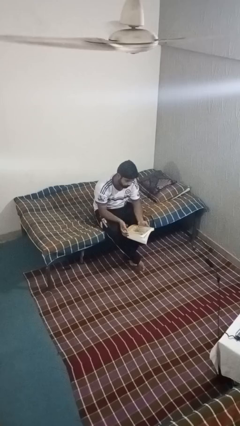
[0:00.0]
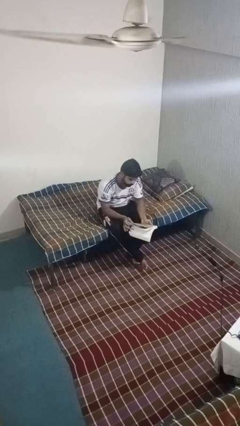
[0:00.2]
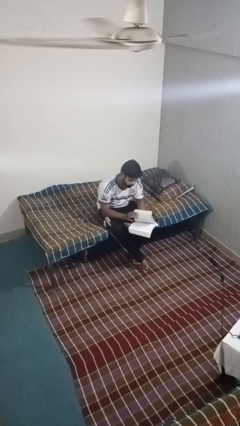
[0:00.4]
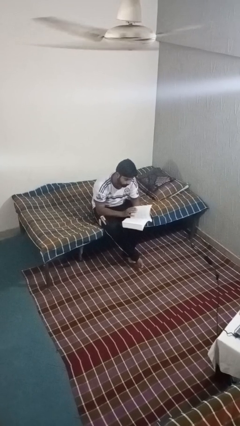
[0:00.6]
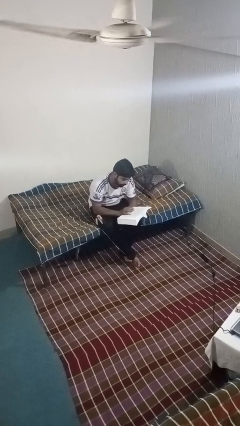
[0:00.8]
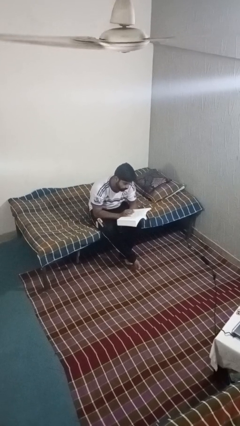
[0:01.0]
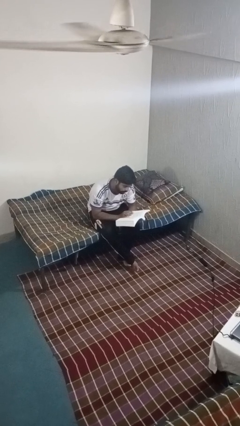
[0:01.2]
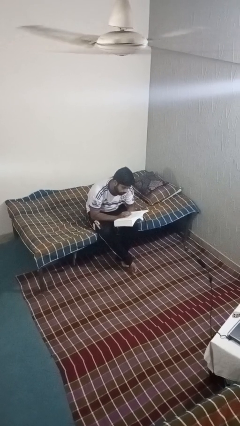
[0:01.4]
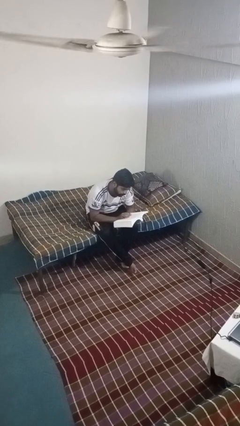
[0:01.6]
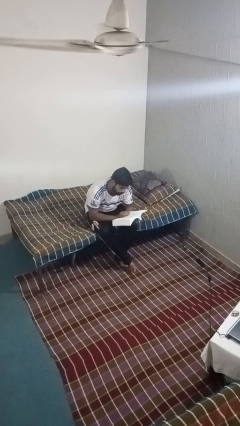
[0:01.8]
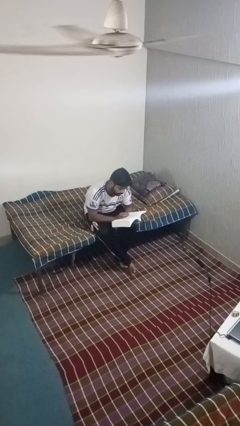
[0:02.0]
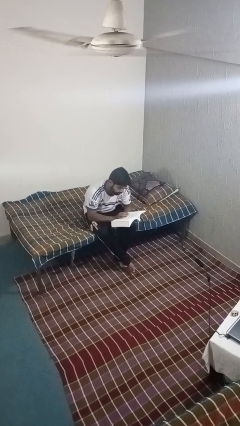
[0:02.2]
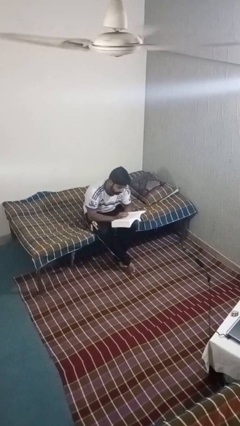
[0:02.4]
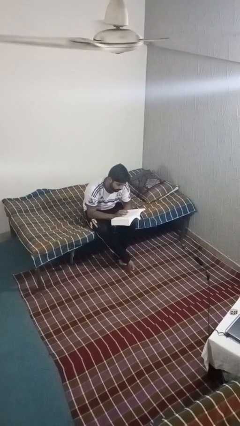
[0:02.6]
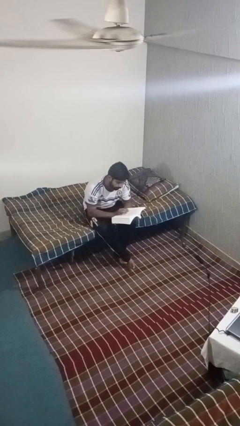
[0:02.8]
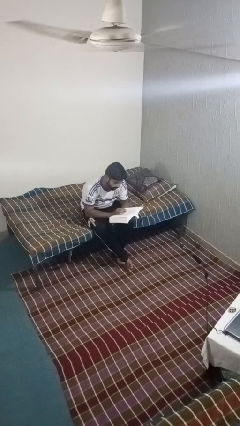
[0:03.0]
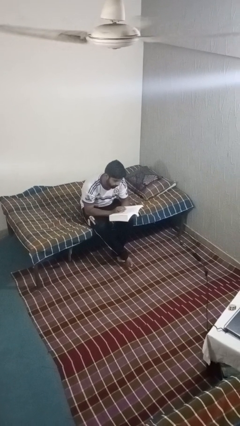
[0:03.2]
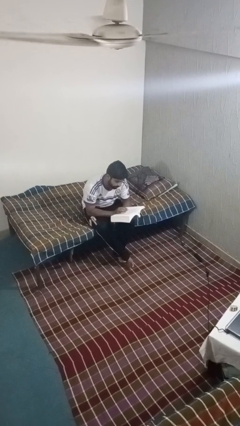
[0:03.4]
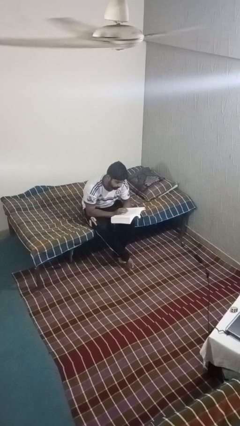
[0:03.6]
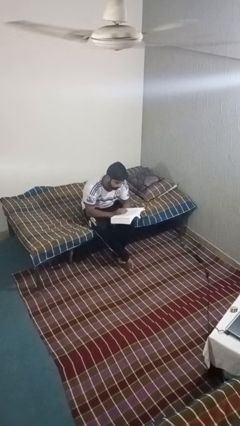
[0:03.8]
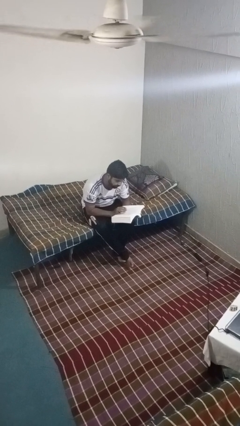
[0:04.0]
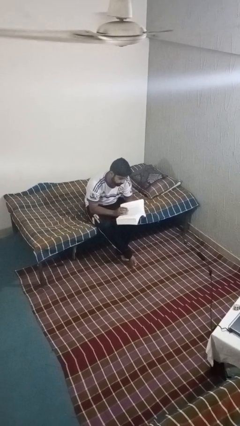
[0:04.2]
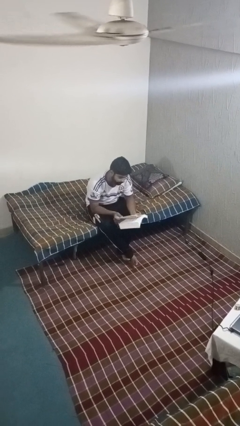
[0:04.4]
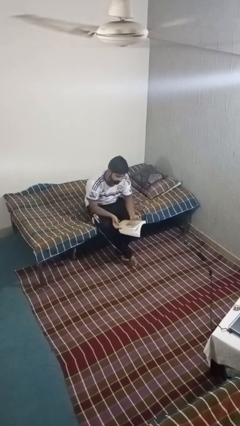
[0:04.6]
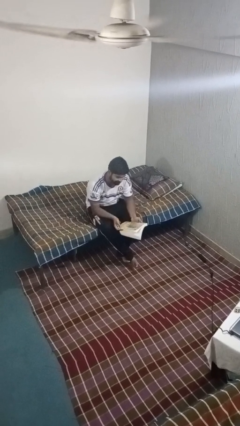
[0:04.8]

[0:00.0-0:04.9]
person reads book

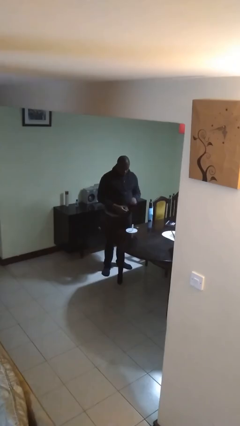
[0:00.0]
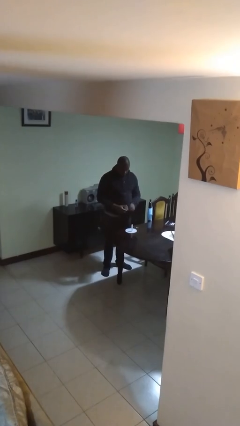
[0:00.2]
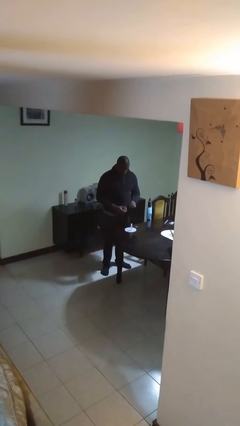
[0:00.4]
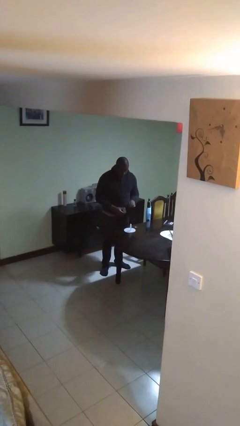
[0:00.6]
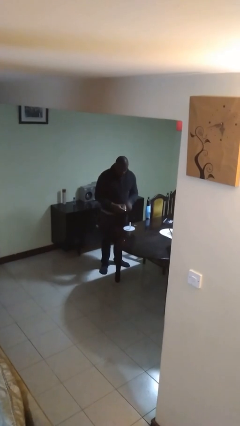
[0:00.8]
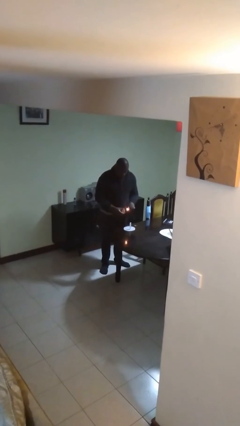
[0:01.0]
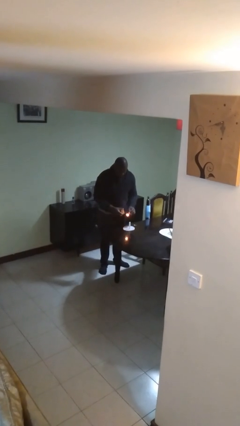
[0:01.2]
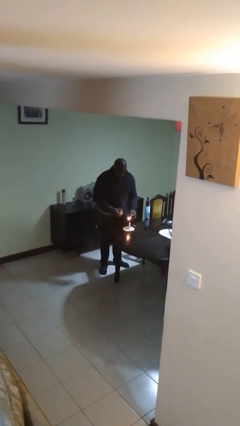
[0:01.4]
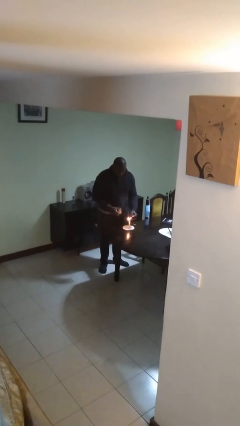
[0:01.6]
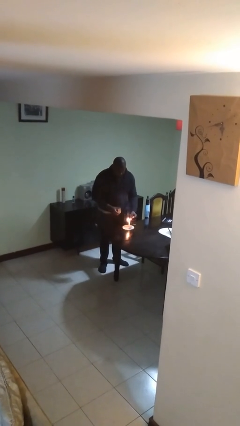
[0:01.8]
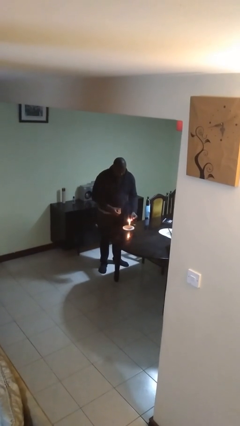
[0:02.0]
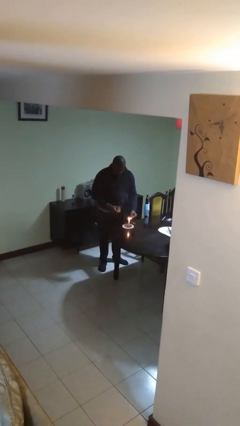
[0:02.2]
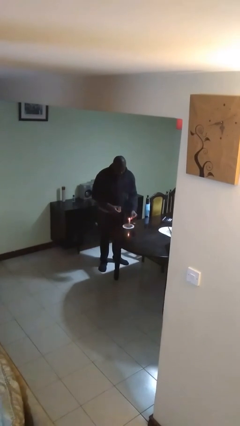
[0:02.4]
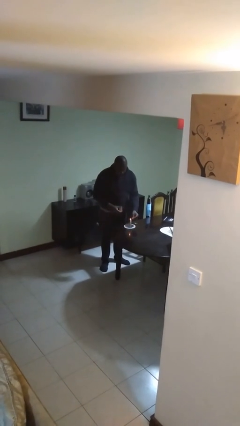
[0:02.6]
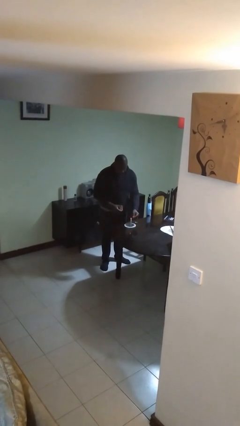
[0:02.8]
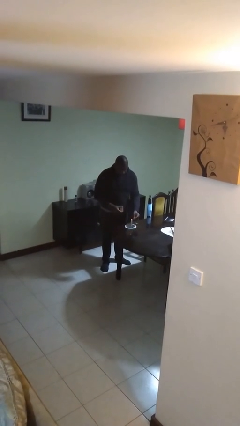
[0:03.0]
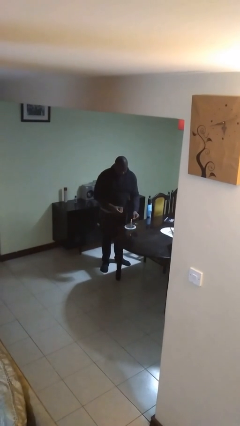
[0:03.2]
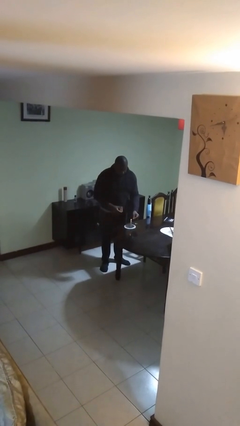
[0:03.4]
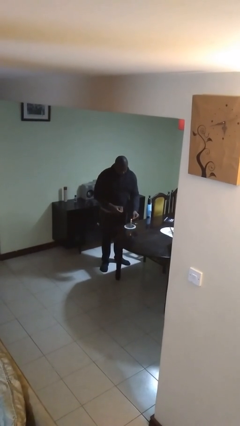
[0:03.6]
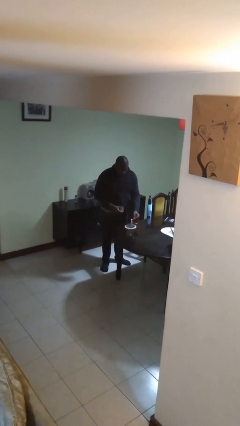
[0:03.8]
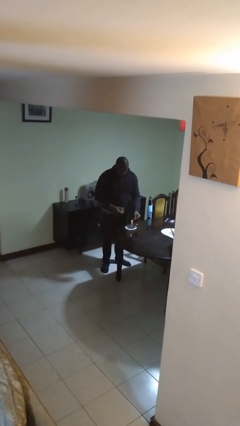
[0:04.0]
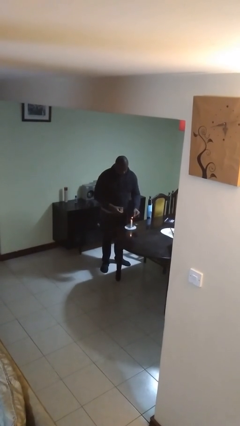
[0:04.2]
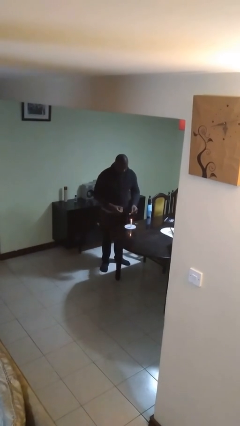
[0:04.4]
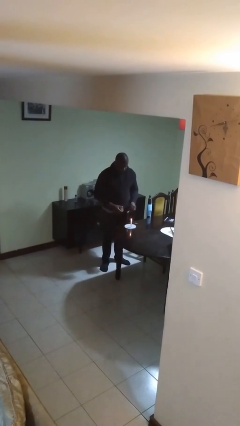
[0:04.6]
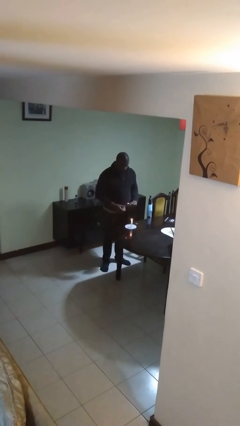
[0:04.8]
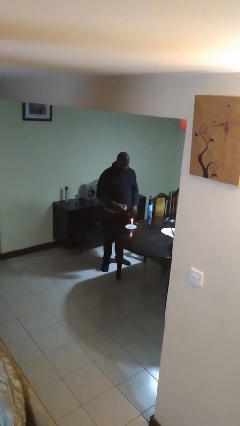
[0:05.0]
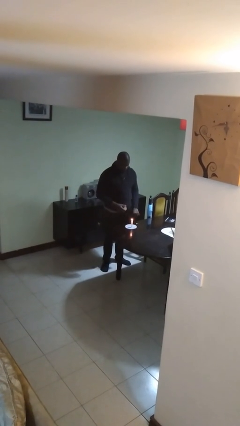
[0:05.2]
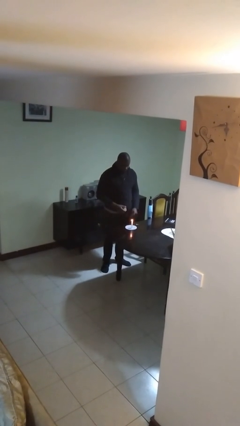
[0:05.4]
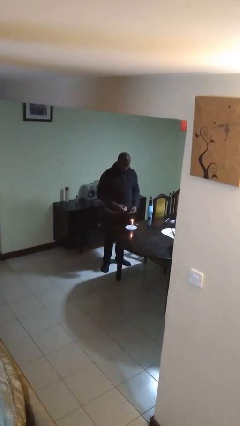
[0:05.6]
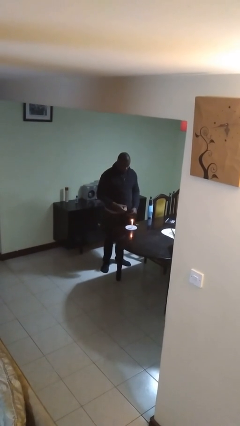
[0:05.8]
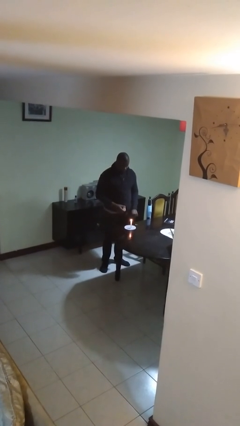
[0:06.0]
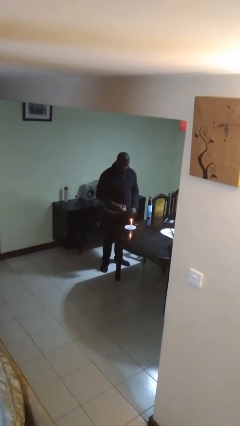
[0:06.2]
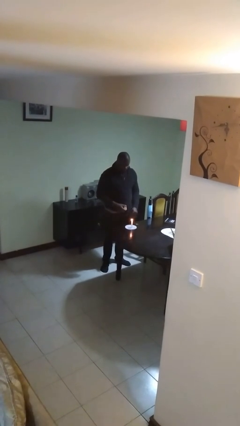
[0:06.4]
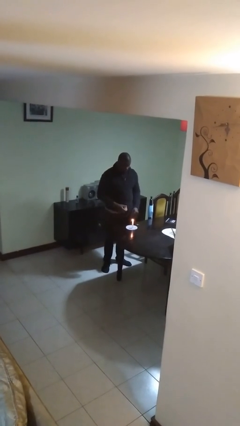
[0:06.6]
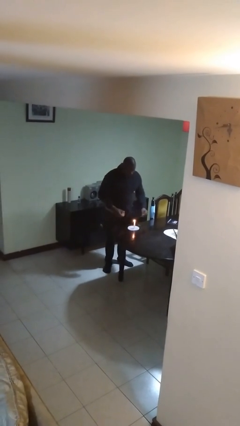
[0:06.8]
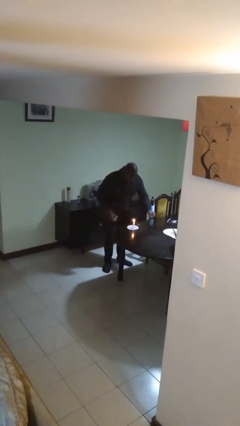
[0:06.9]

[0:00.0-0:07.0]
person lights candle

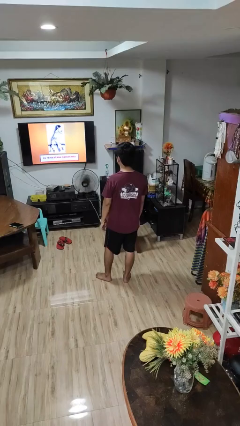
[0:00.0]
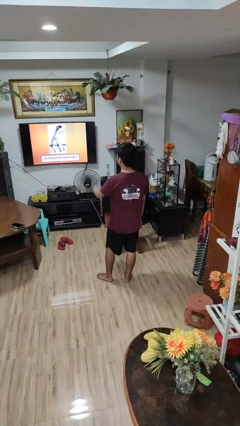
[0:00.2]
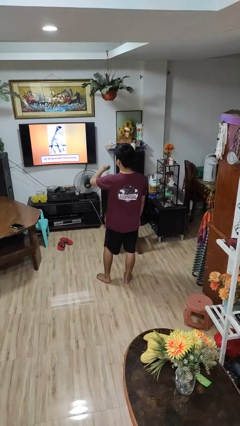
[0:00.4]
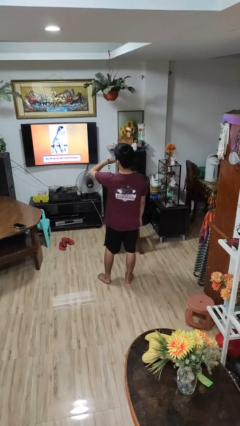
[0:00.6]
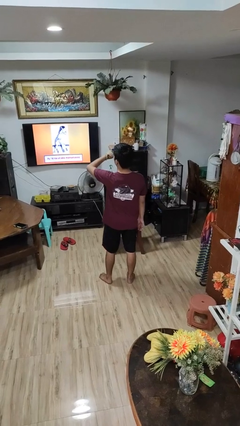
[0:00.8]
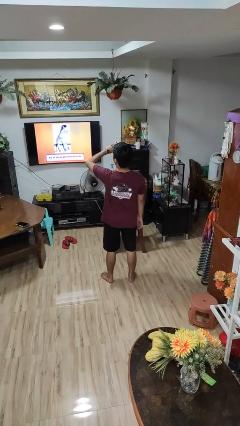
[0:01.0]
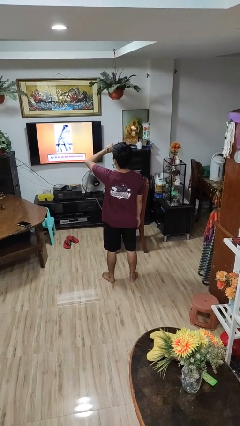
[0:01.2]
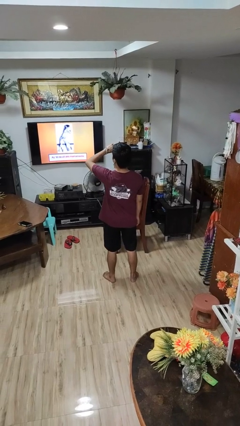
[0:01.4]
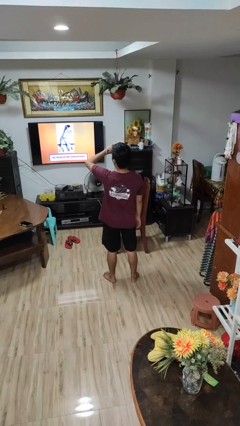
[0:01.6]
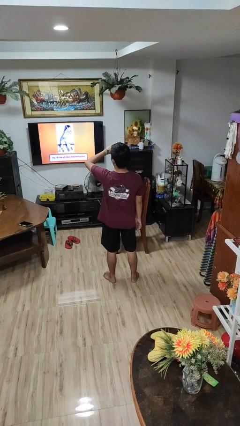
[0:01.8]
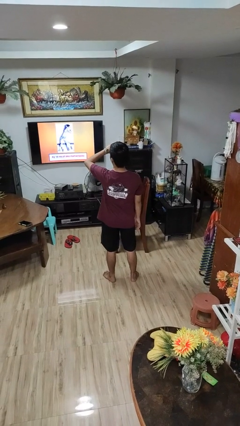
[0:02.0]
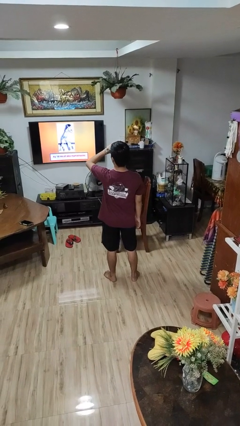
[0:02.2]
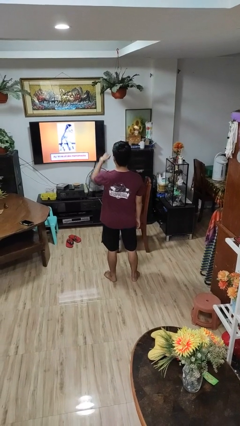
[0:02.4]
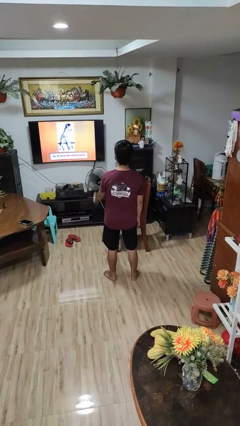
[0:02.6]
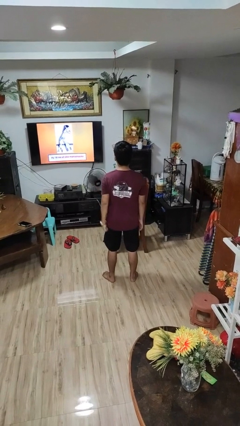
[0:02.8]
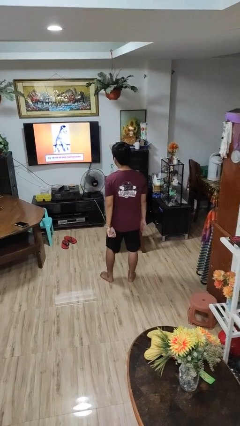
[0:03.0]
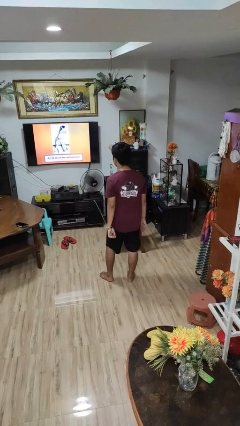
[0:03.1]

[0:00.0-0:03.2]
person looks at wristwatch

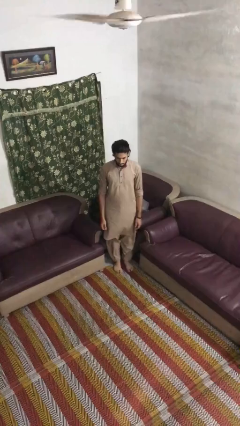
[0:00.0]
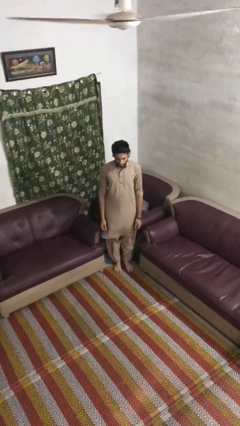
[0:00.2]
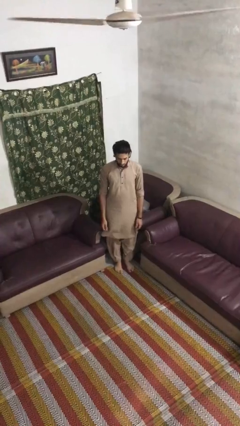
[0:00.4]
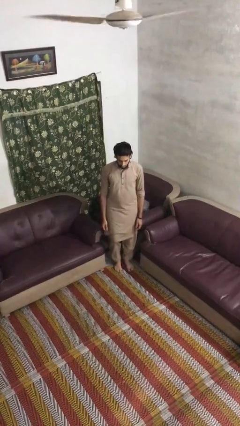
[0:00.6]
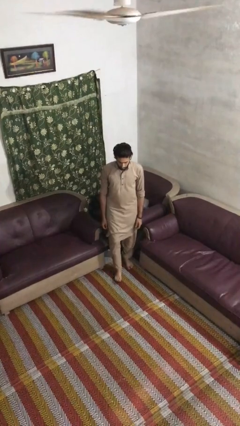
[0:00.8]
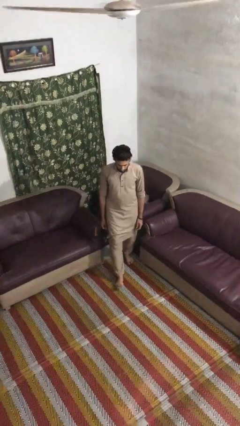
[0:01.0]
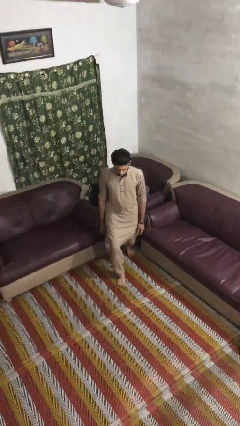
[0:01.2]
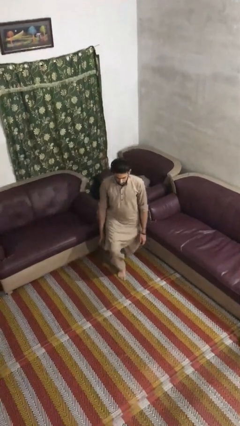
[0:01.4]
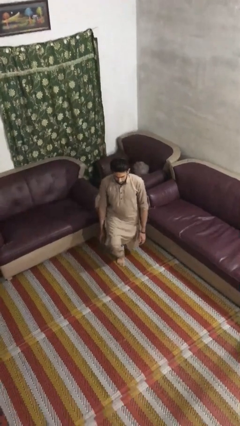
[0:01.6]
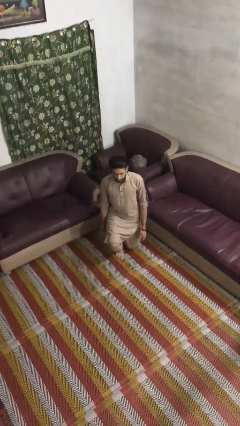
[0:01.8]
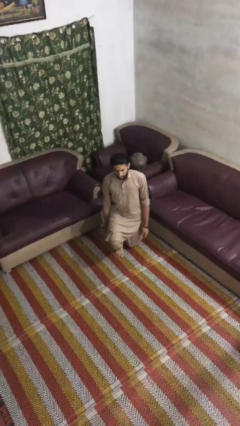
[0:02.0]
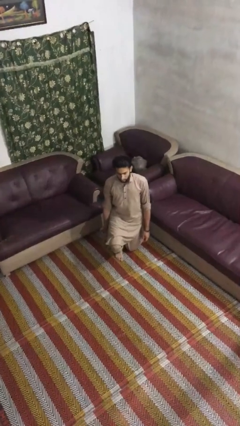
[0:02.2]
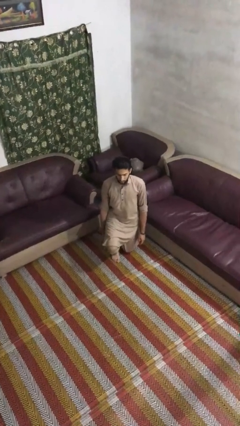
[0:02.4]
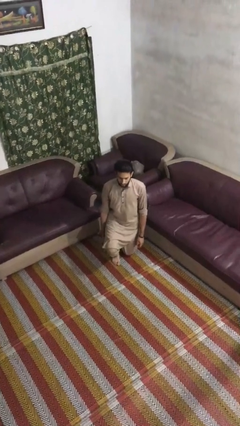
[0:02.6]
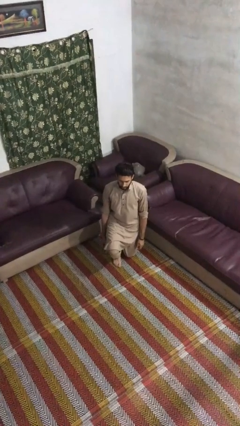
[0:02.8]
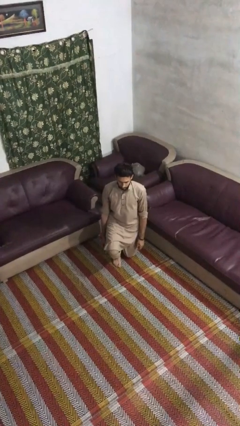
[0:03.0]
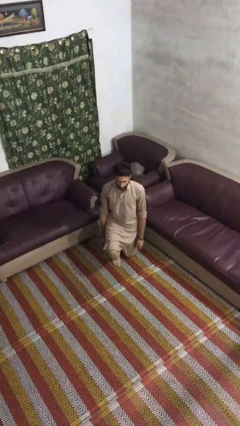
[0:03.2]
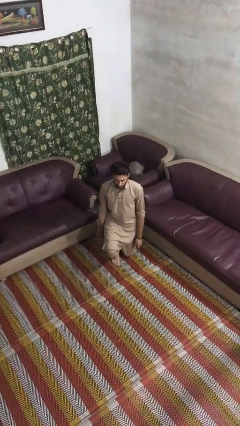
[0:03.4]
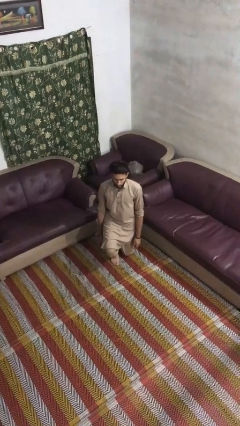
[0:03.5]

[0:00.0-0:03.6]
person kneels
